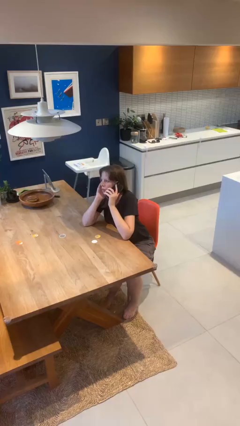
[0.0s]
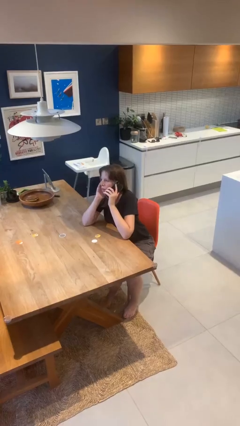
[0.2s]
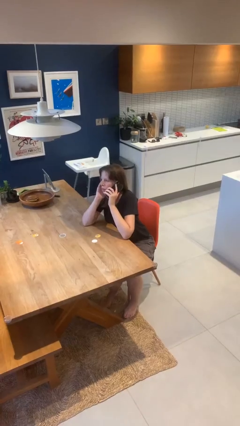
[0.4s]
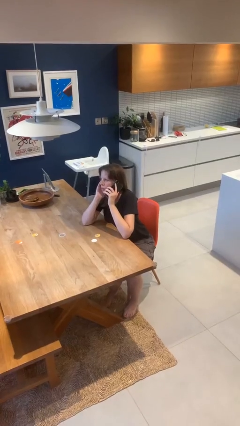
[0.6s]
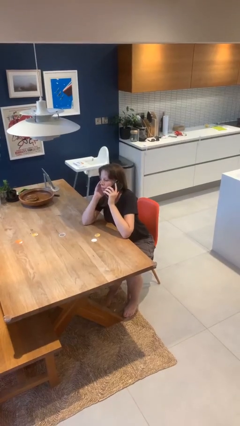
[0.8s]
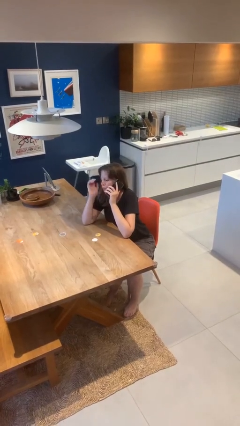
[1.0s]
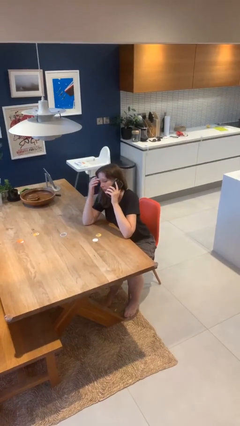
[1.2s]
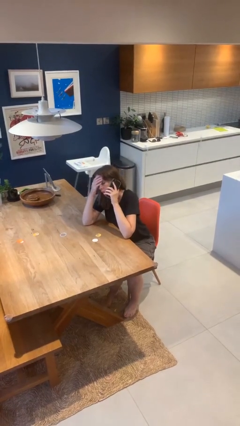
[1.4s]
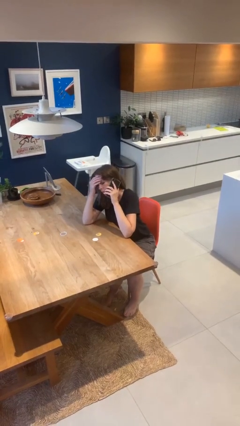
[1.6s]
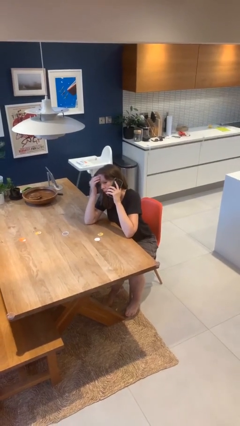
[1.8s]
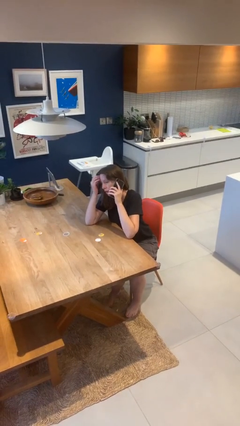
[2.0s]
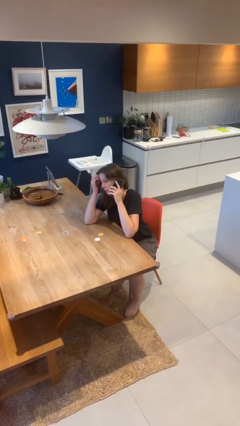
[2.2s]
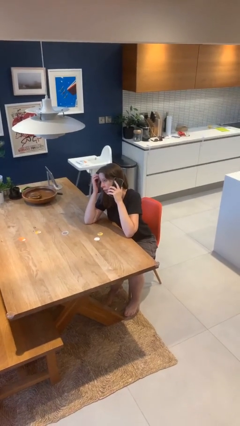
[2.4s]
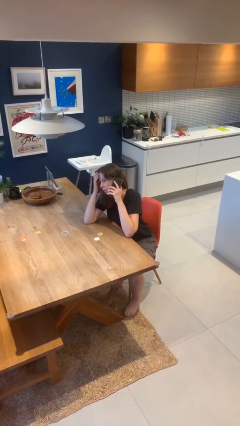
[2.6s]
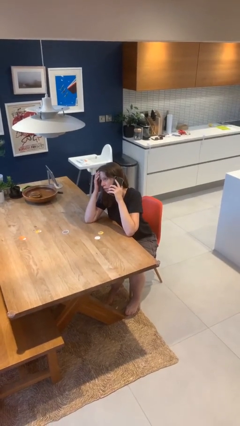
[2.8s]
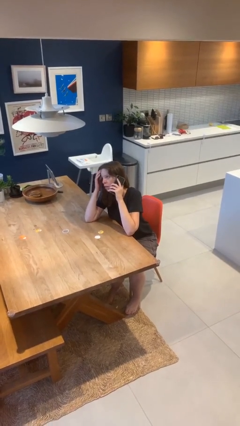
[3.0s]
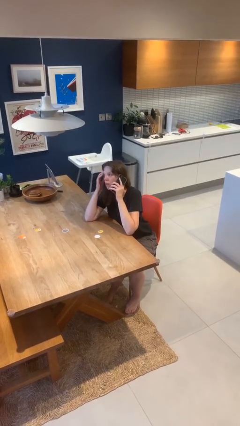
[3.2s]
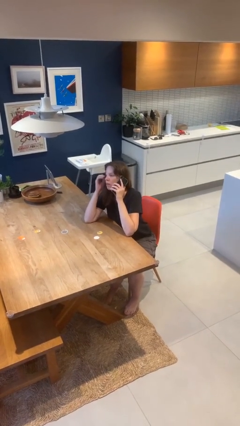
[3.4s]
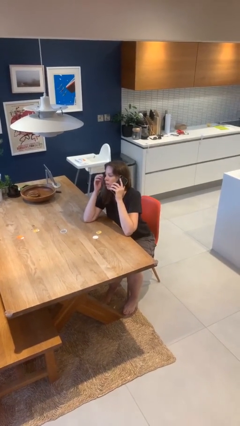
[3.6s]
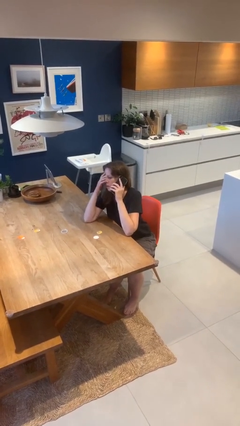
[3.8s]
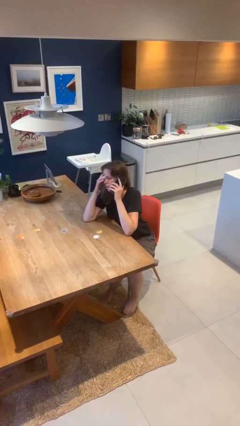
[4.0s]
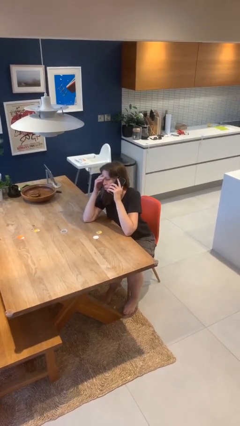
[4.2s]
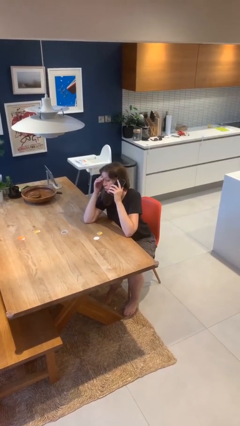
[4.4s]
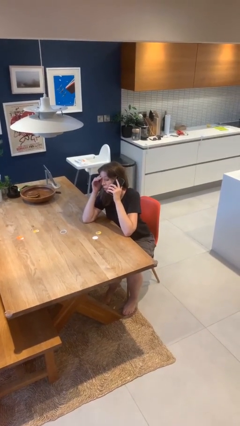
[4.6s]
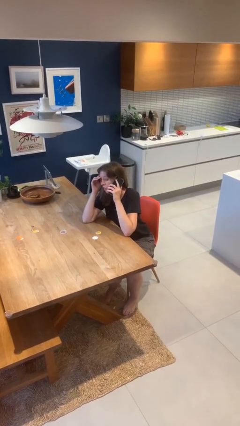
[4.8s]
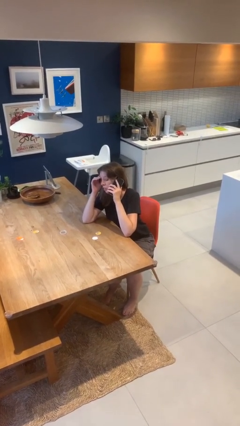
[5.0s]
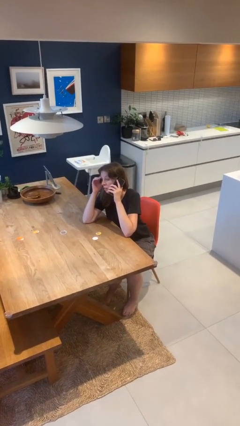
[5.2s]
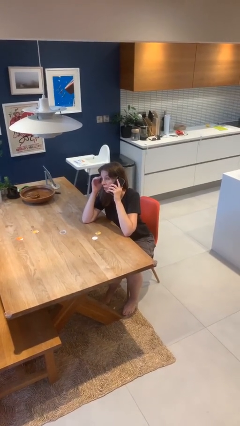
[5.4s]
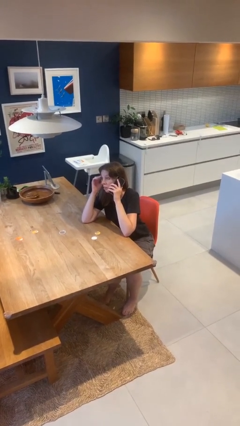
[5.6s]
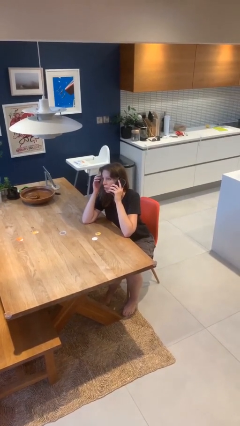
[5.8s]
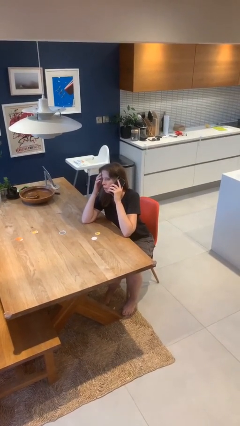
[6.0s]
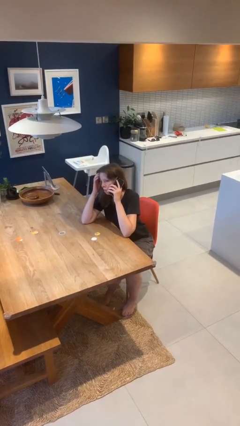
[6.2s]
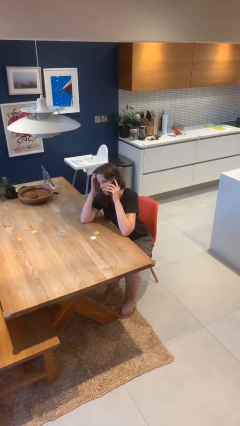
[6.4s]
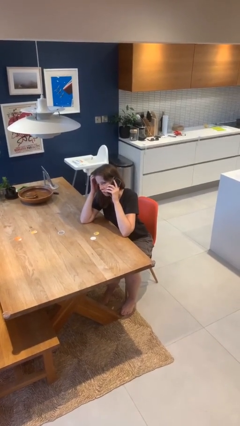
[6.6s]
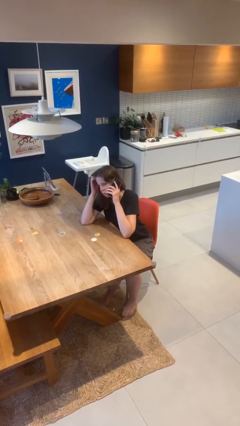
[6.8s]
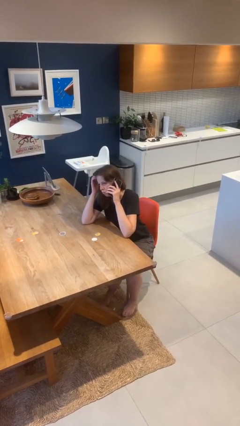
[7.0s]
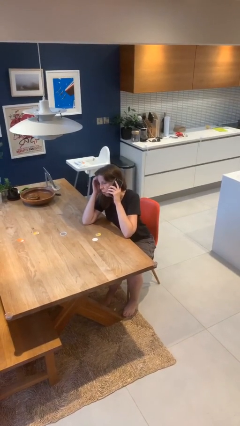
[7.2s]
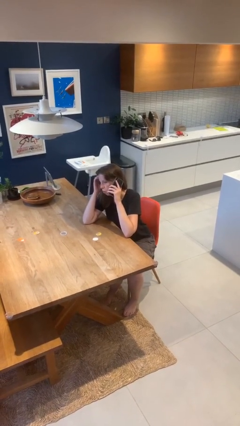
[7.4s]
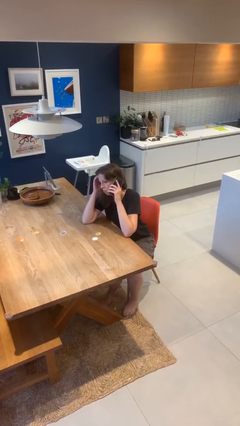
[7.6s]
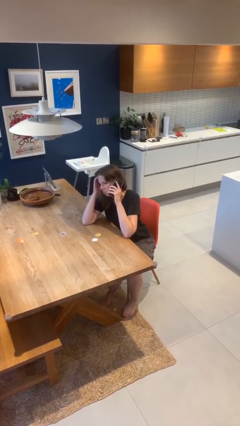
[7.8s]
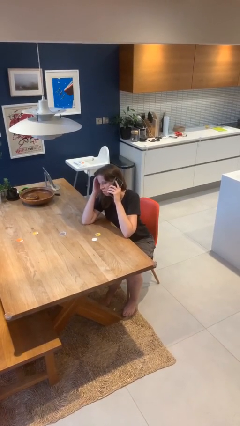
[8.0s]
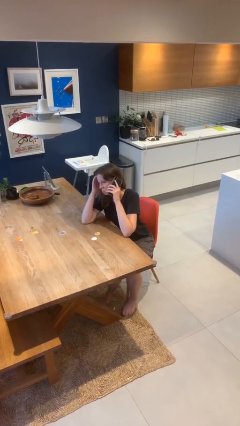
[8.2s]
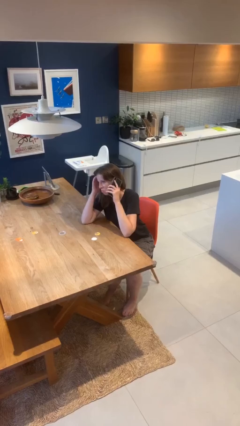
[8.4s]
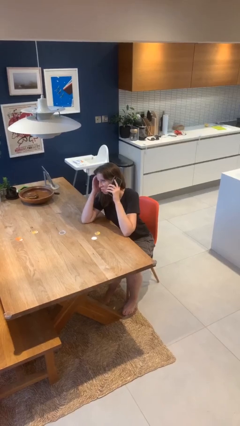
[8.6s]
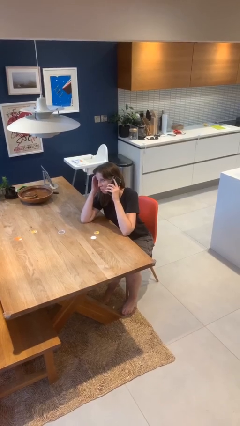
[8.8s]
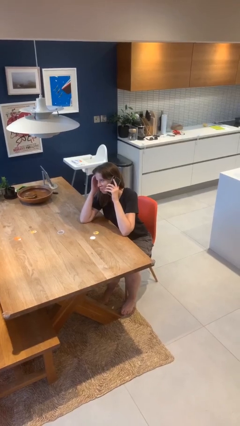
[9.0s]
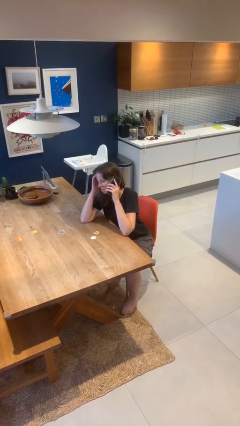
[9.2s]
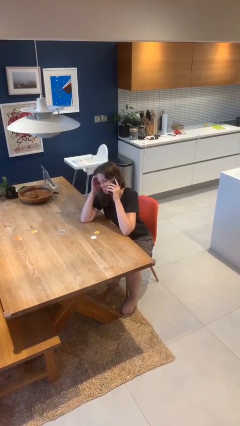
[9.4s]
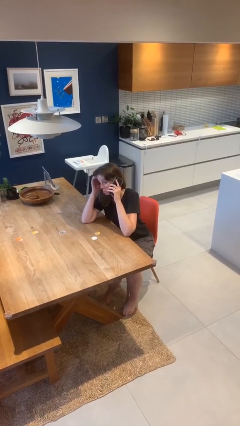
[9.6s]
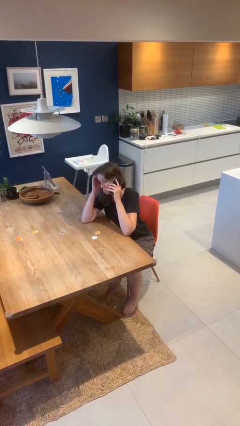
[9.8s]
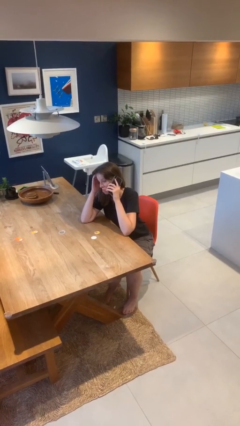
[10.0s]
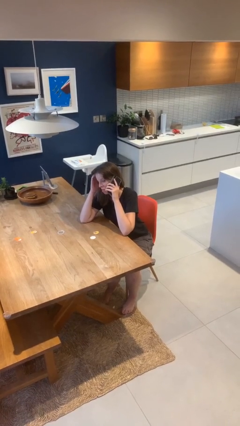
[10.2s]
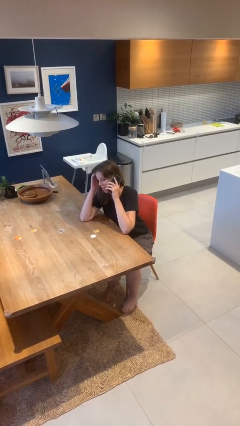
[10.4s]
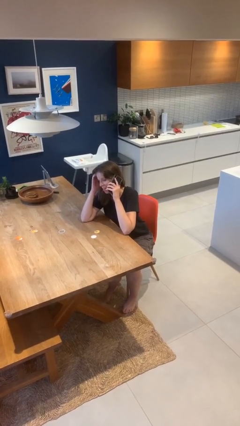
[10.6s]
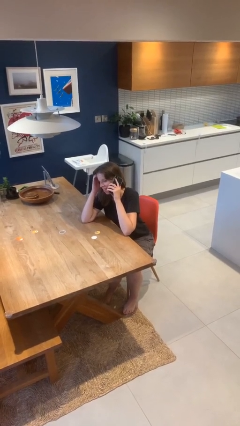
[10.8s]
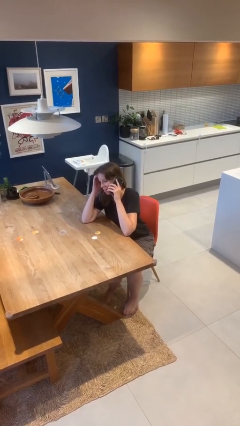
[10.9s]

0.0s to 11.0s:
person talks on phone

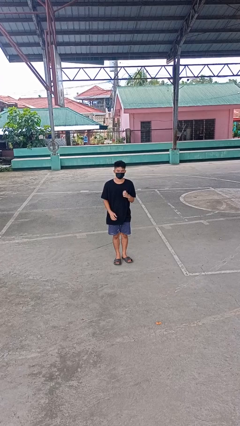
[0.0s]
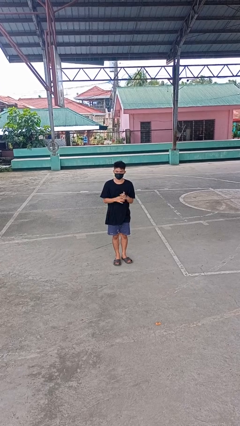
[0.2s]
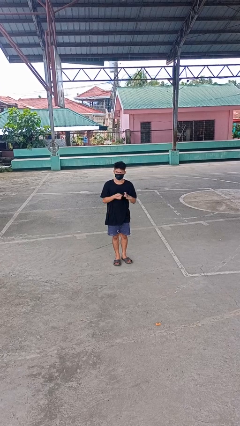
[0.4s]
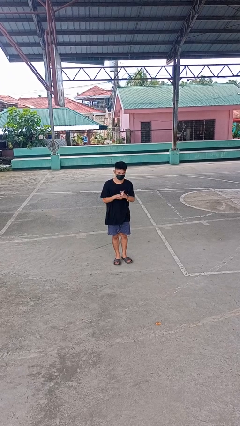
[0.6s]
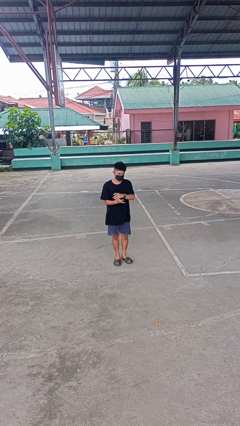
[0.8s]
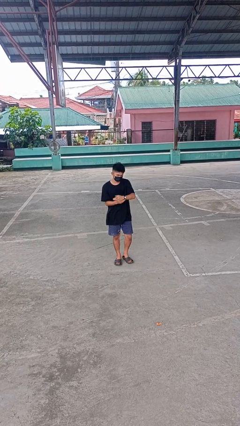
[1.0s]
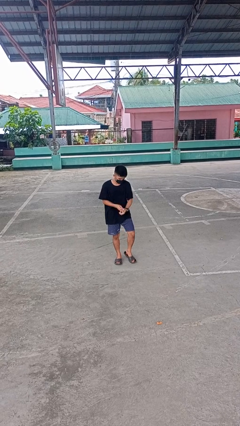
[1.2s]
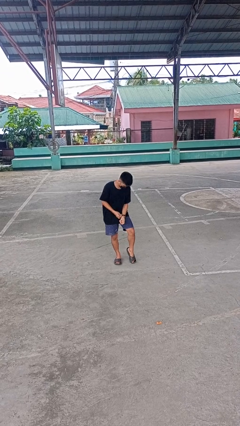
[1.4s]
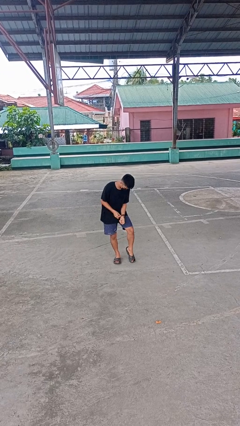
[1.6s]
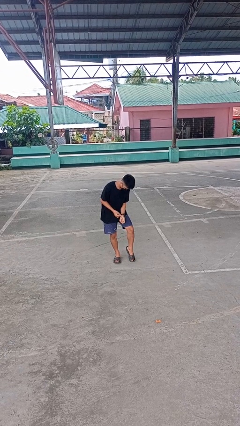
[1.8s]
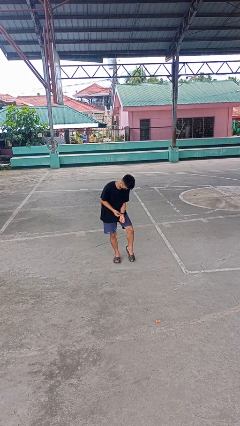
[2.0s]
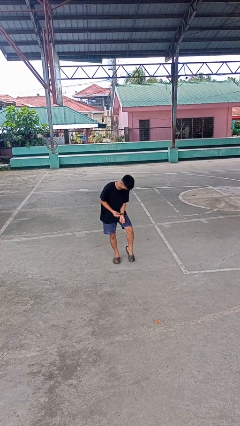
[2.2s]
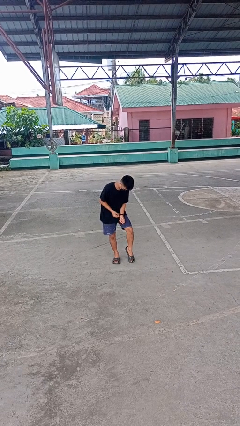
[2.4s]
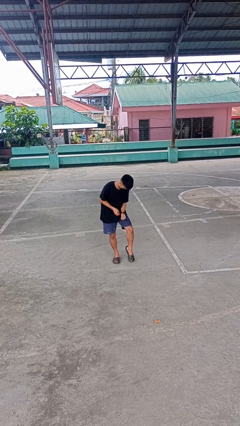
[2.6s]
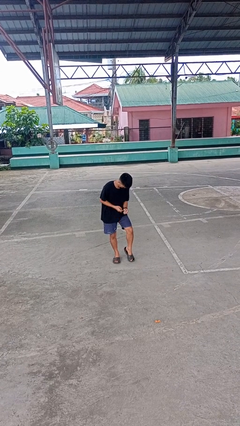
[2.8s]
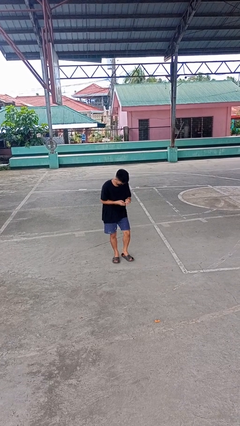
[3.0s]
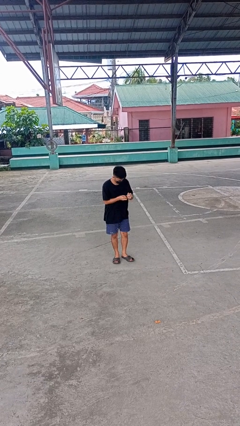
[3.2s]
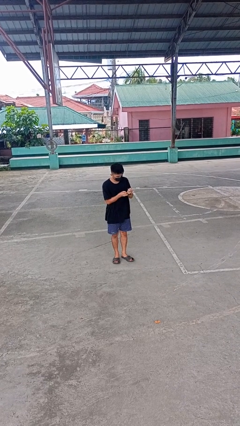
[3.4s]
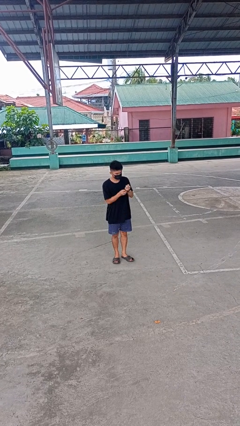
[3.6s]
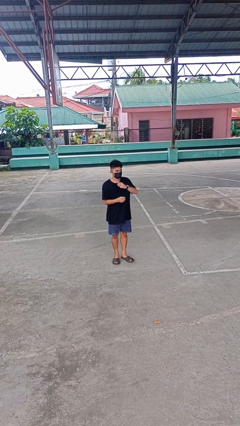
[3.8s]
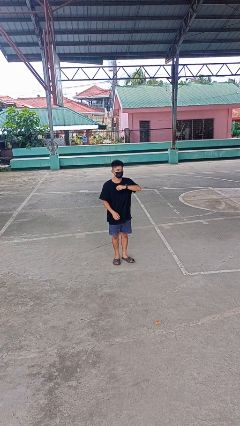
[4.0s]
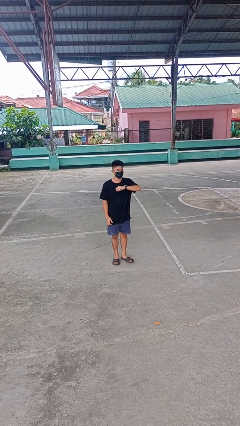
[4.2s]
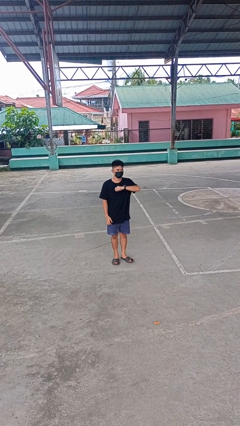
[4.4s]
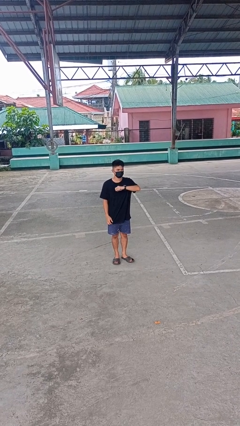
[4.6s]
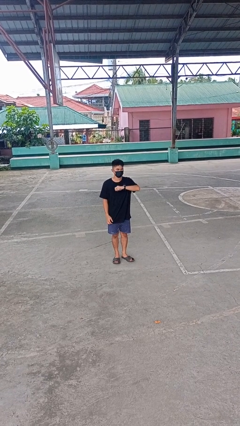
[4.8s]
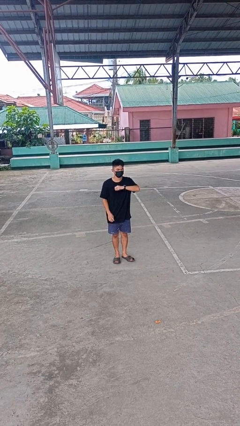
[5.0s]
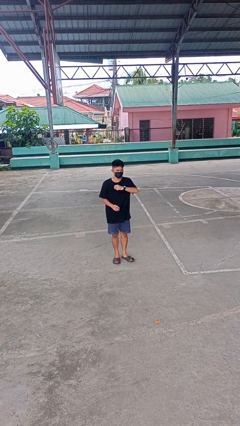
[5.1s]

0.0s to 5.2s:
person puts on wristwatch

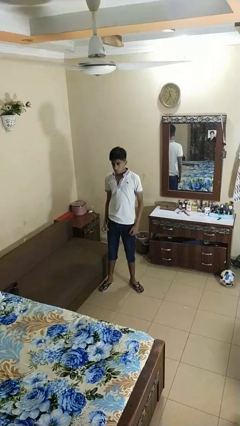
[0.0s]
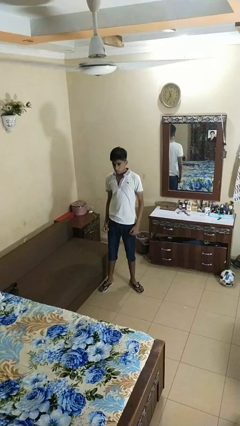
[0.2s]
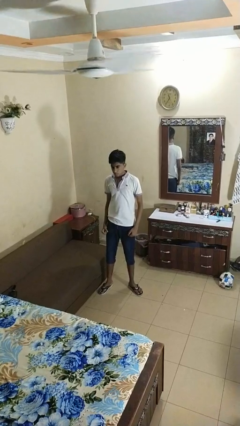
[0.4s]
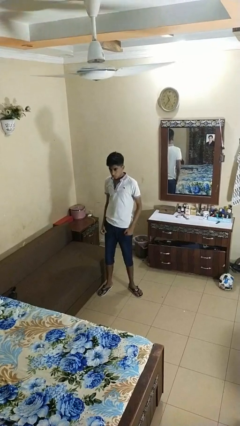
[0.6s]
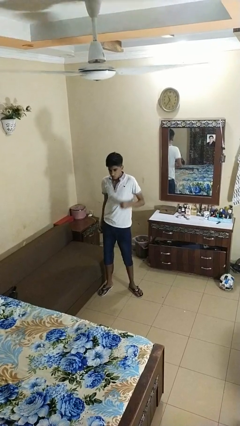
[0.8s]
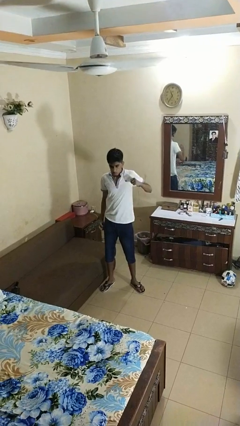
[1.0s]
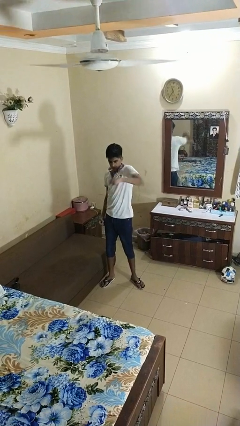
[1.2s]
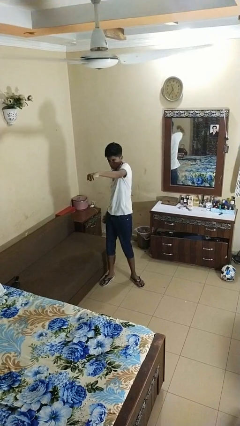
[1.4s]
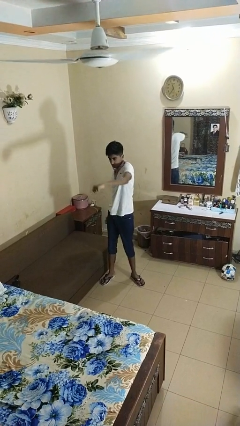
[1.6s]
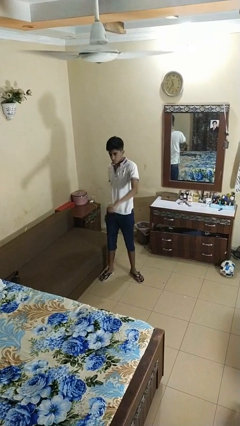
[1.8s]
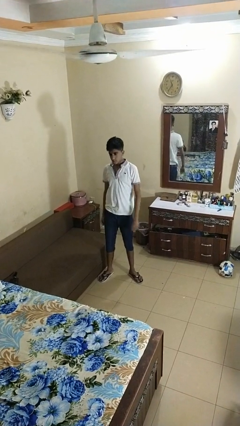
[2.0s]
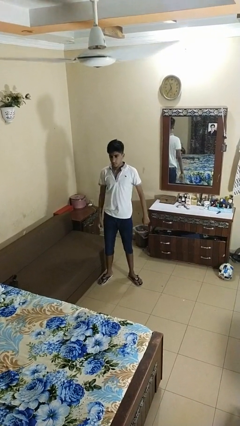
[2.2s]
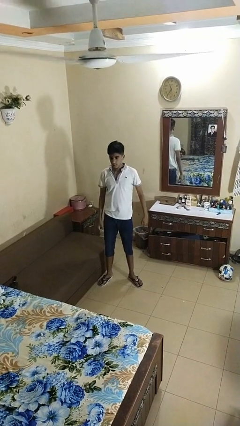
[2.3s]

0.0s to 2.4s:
person punches
